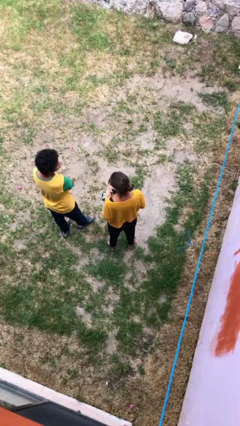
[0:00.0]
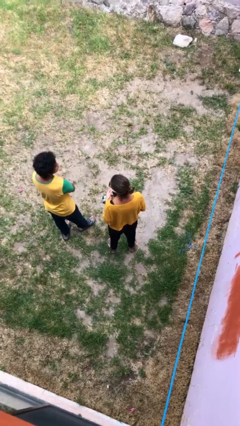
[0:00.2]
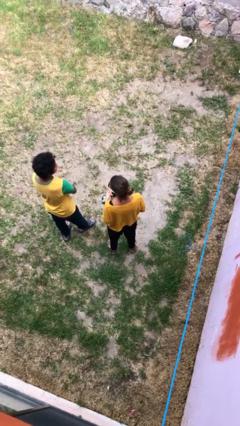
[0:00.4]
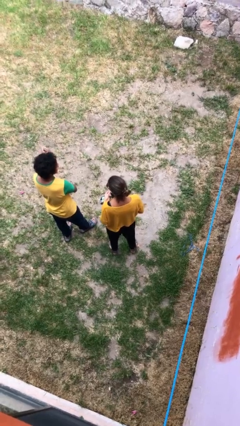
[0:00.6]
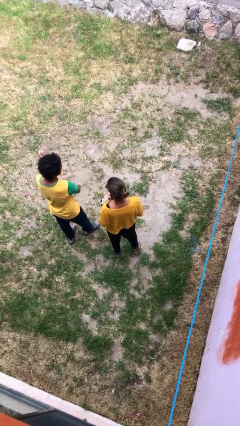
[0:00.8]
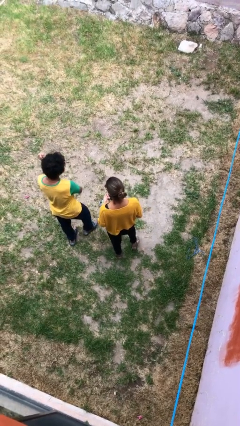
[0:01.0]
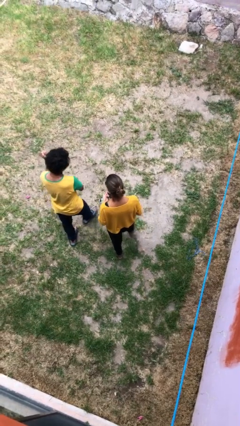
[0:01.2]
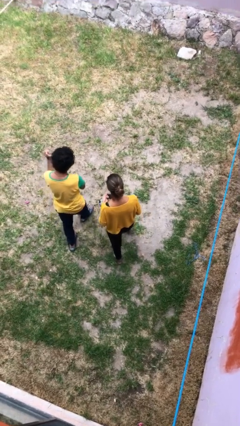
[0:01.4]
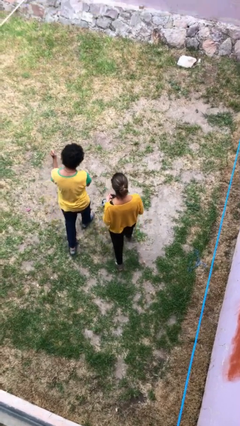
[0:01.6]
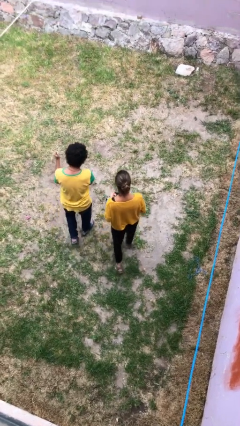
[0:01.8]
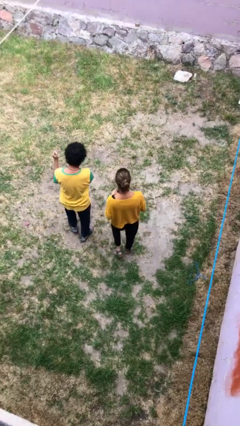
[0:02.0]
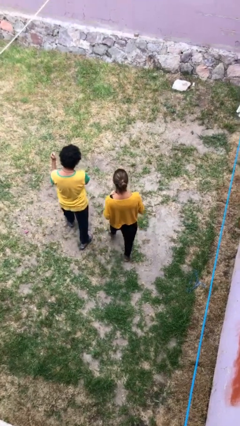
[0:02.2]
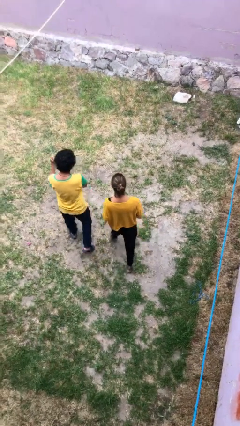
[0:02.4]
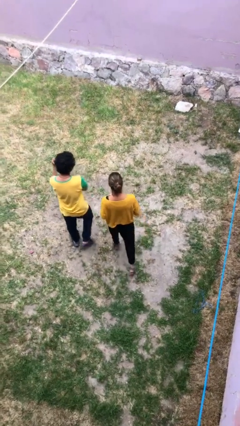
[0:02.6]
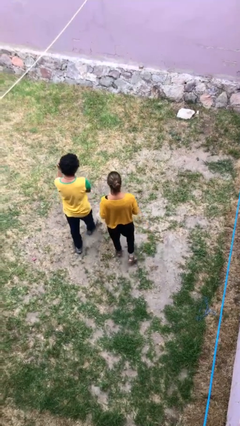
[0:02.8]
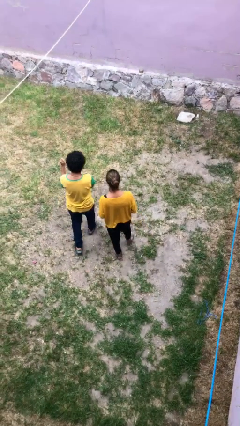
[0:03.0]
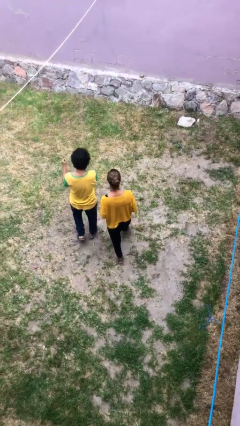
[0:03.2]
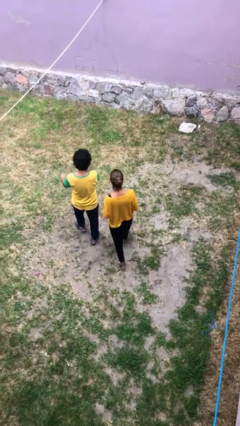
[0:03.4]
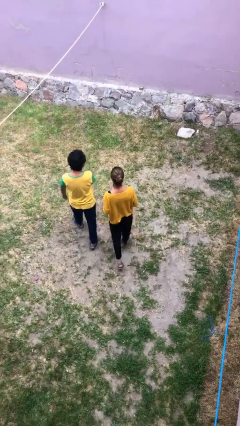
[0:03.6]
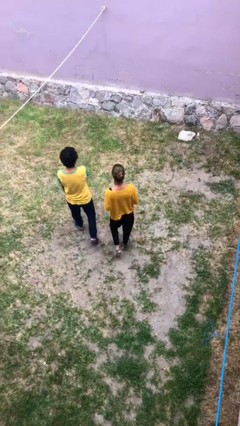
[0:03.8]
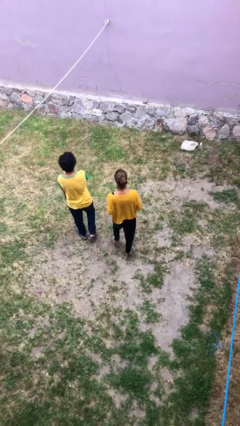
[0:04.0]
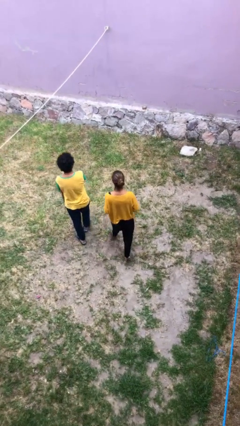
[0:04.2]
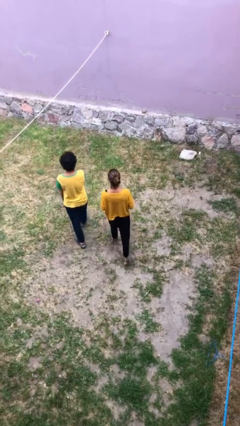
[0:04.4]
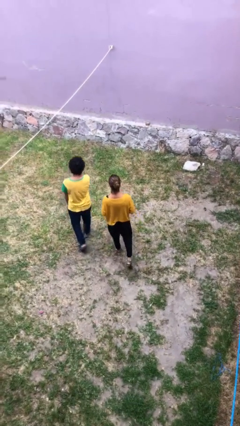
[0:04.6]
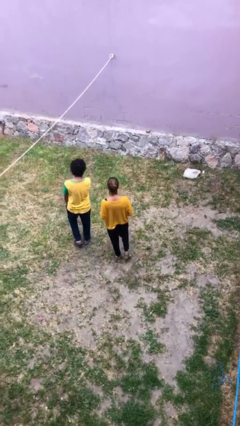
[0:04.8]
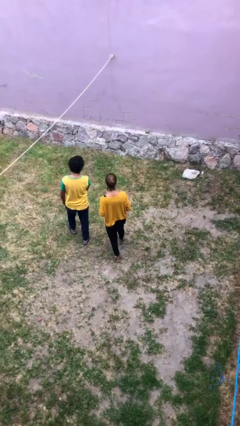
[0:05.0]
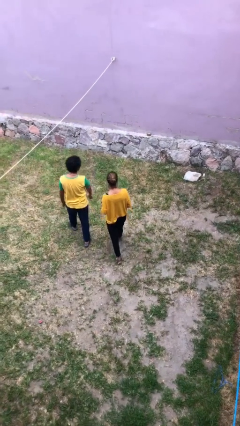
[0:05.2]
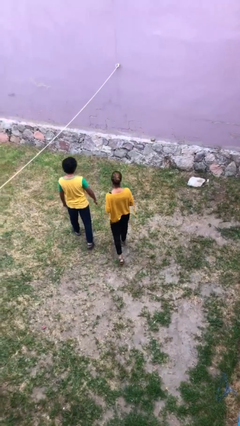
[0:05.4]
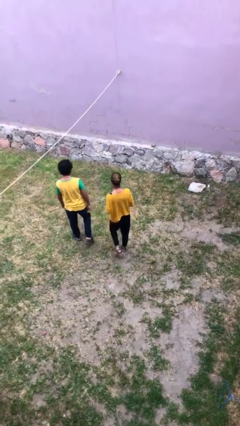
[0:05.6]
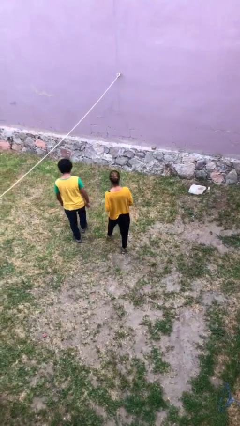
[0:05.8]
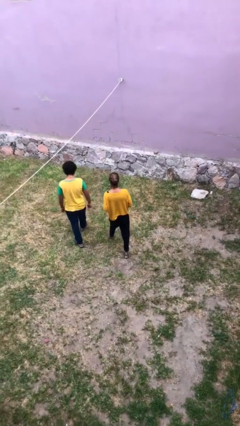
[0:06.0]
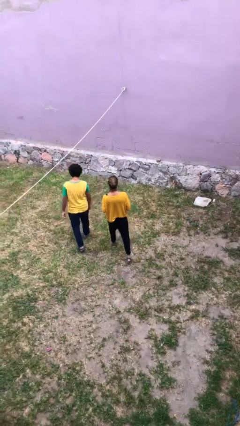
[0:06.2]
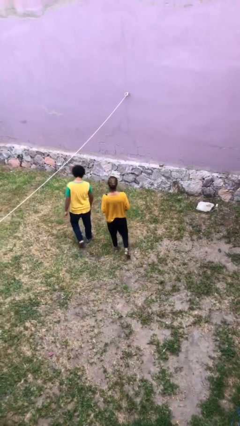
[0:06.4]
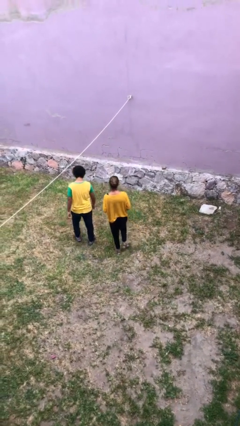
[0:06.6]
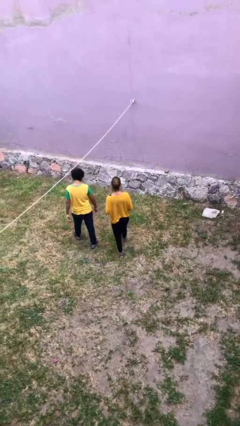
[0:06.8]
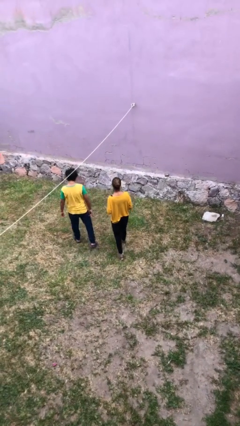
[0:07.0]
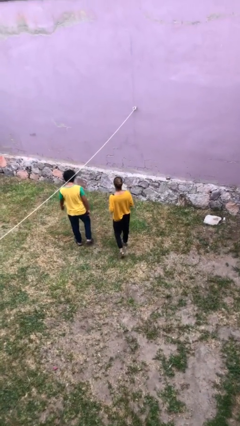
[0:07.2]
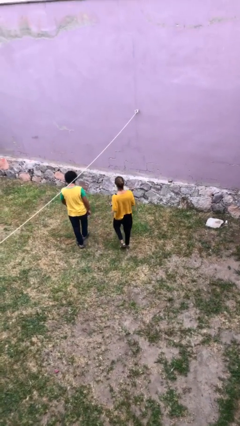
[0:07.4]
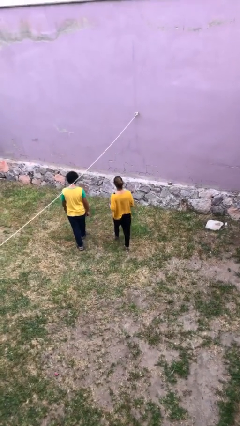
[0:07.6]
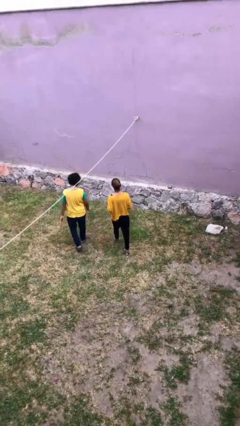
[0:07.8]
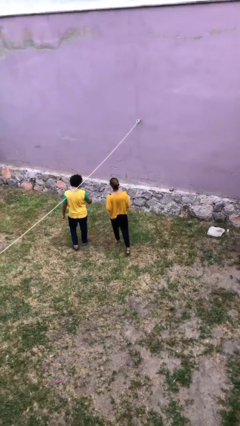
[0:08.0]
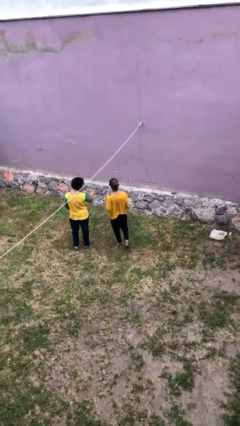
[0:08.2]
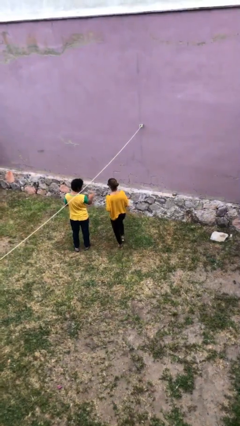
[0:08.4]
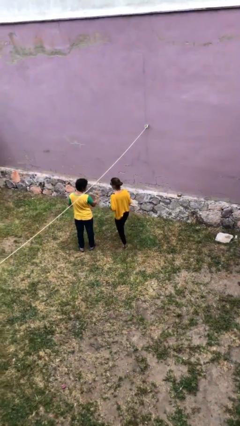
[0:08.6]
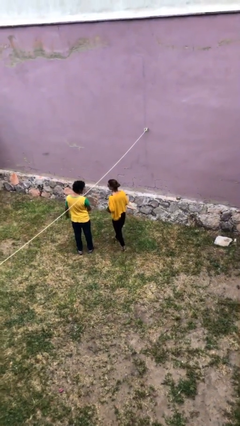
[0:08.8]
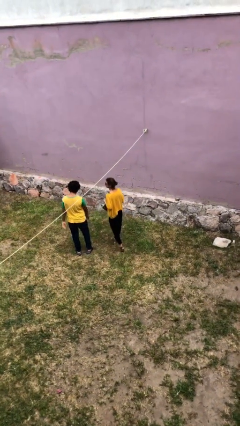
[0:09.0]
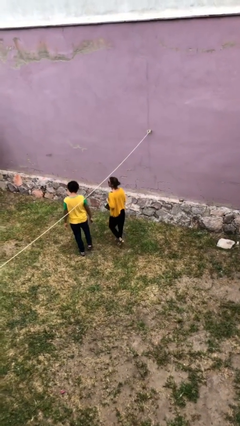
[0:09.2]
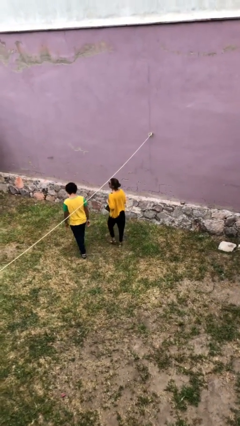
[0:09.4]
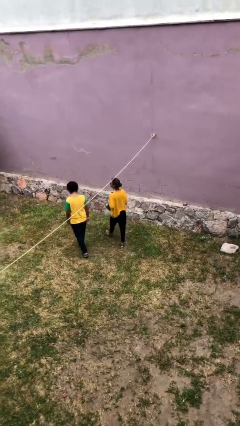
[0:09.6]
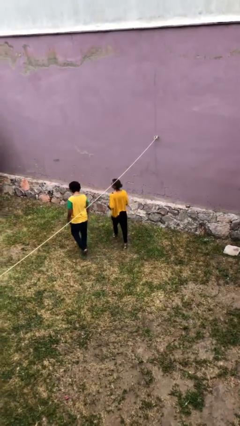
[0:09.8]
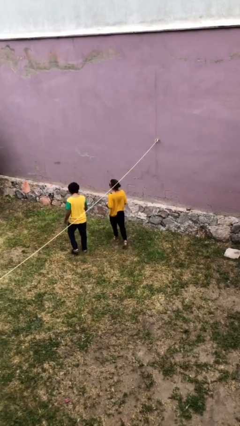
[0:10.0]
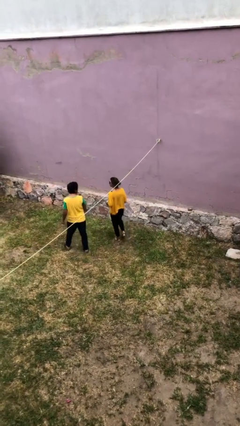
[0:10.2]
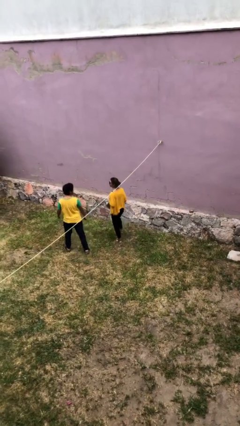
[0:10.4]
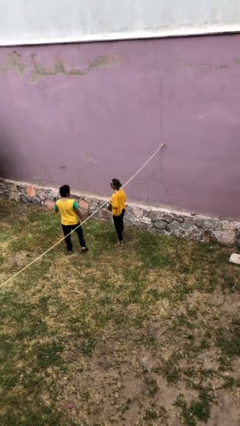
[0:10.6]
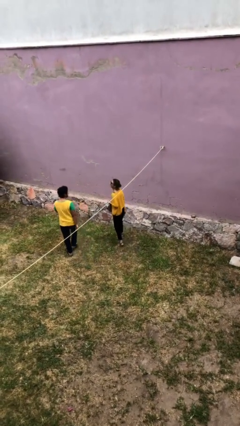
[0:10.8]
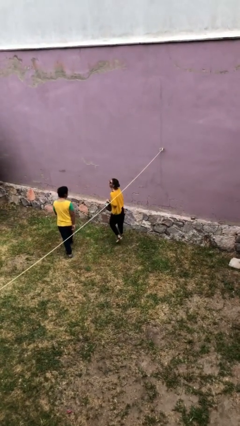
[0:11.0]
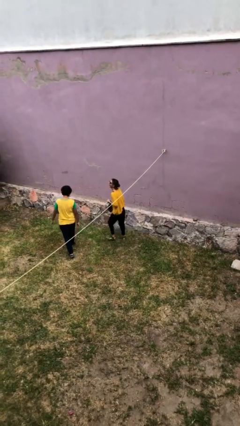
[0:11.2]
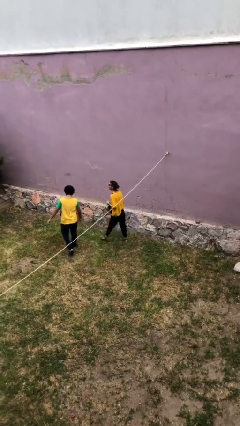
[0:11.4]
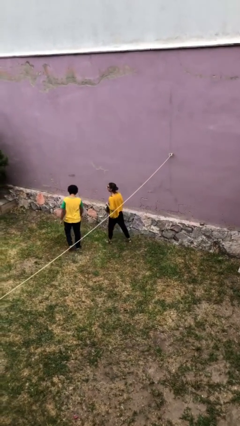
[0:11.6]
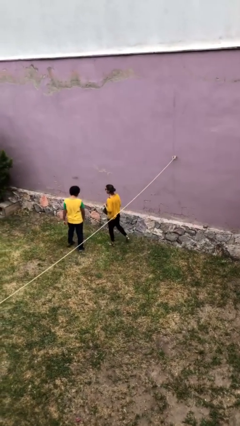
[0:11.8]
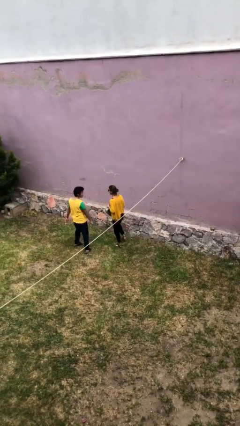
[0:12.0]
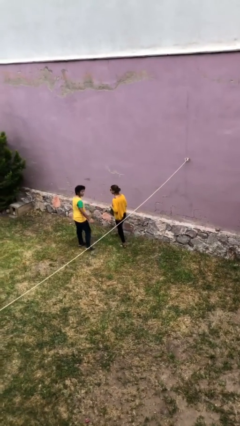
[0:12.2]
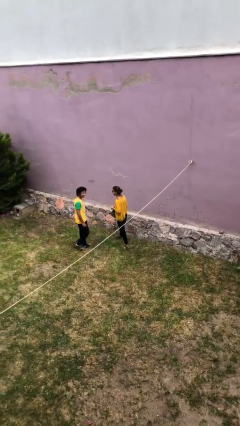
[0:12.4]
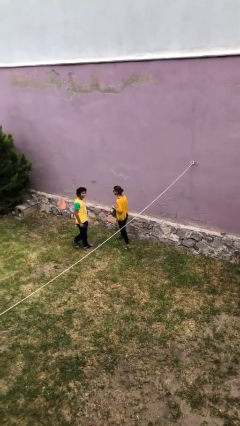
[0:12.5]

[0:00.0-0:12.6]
person talks to person

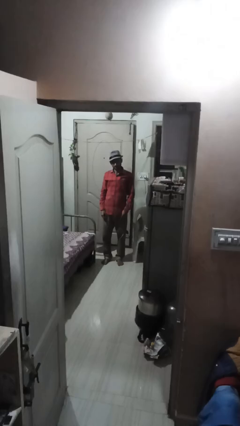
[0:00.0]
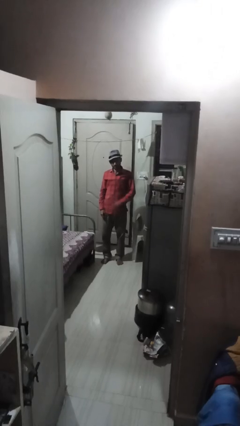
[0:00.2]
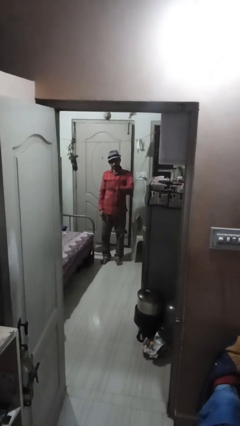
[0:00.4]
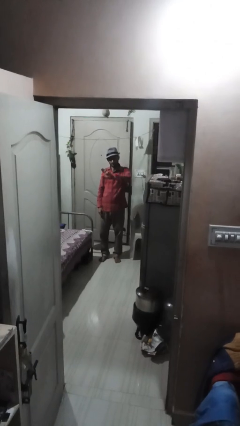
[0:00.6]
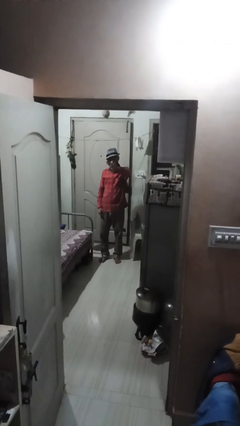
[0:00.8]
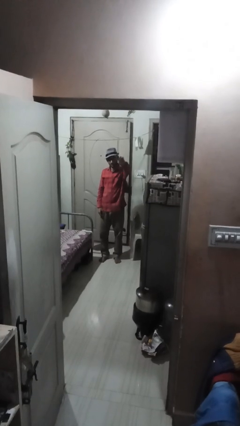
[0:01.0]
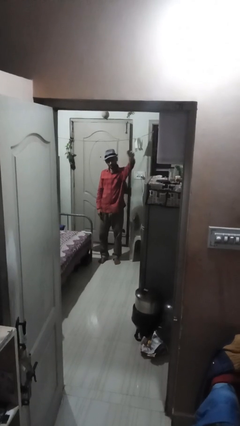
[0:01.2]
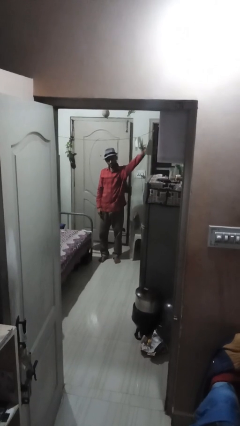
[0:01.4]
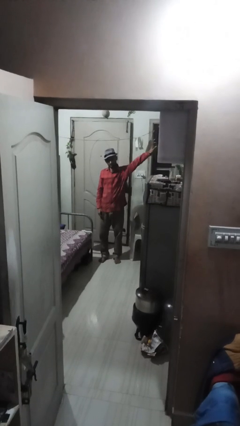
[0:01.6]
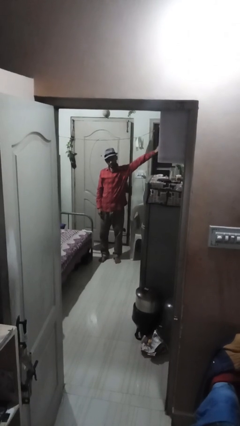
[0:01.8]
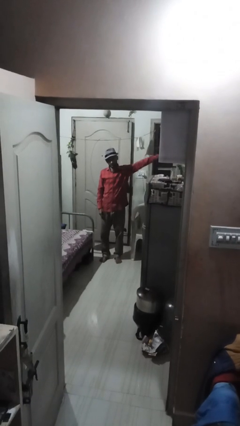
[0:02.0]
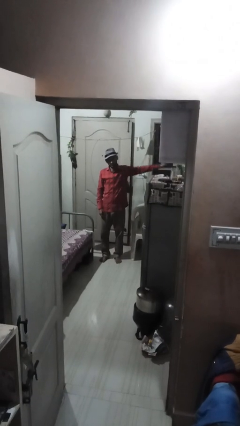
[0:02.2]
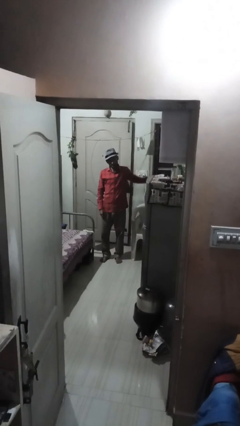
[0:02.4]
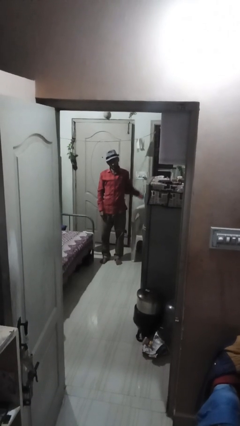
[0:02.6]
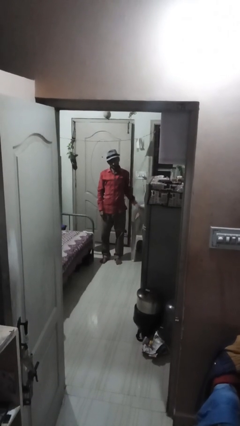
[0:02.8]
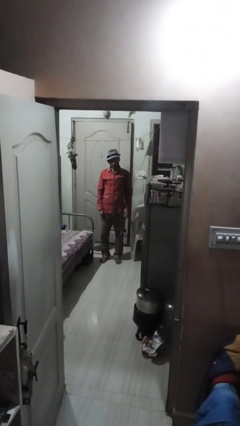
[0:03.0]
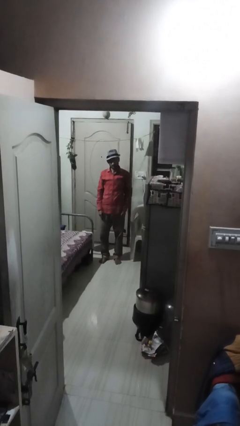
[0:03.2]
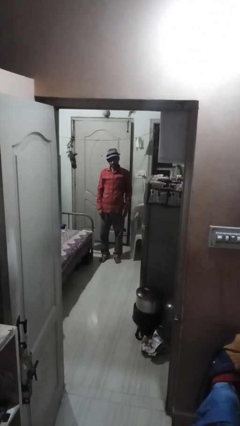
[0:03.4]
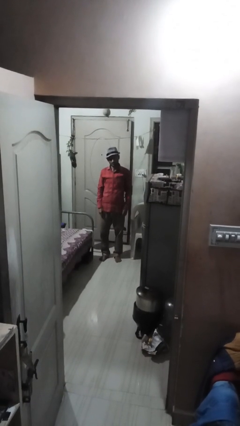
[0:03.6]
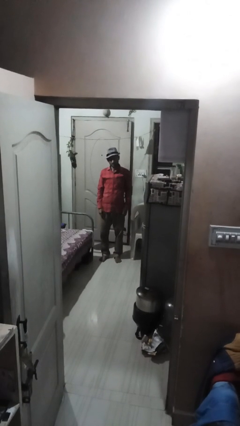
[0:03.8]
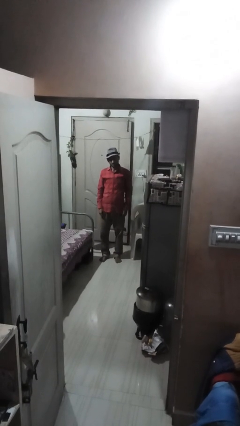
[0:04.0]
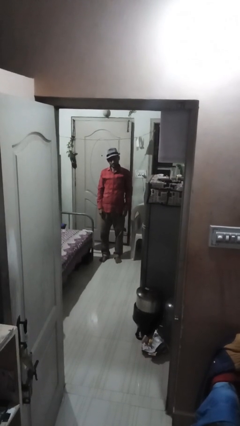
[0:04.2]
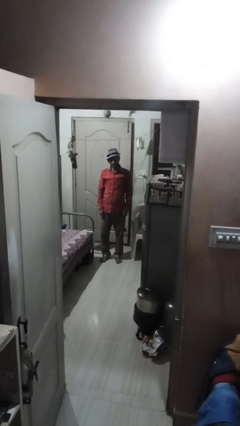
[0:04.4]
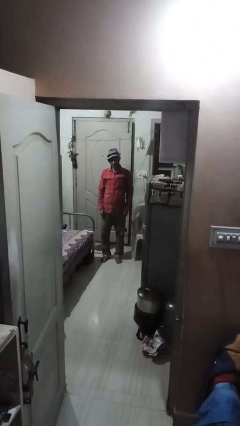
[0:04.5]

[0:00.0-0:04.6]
person gestures swipe left

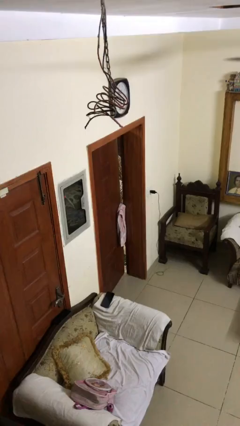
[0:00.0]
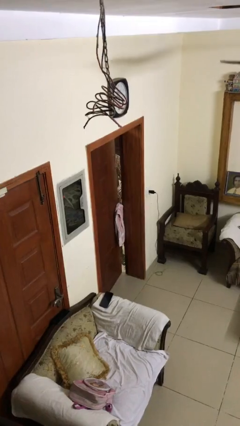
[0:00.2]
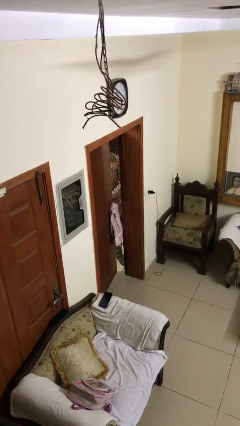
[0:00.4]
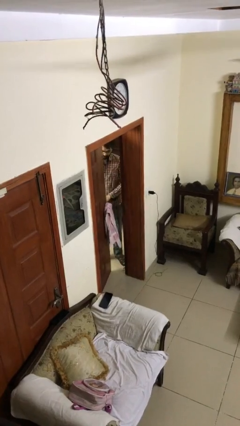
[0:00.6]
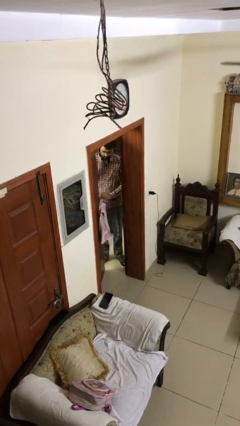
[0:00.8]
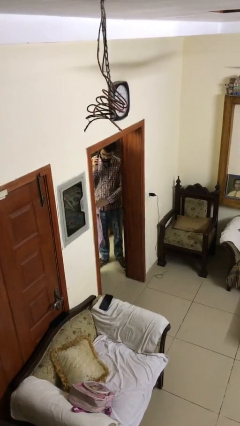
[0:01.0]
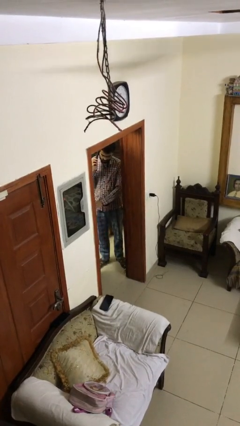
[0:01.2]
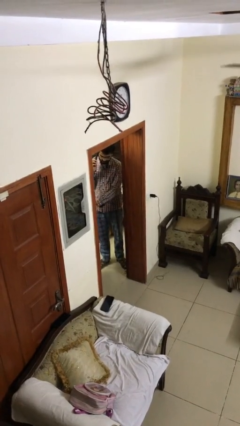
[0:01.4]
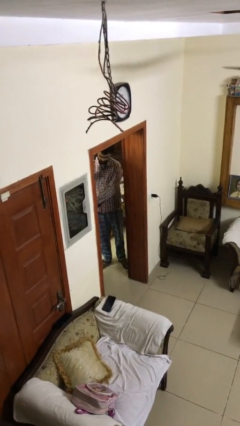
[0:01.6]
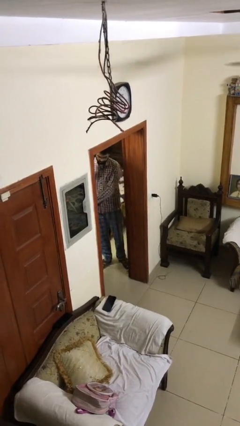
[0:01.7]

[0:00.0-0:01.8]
person opens facility door
